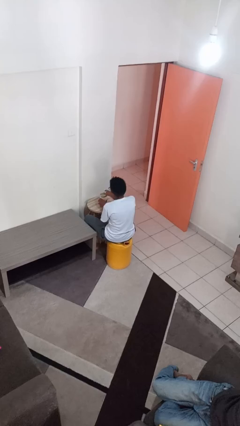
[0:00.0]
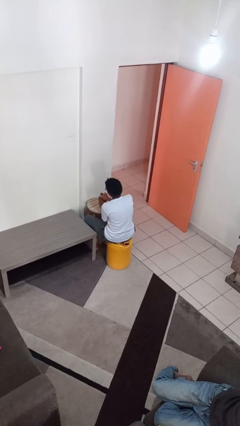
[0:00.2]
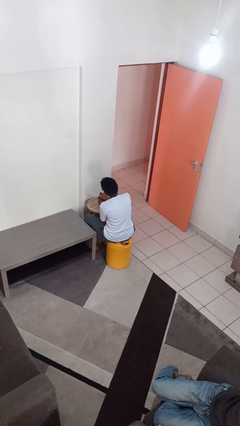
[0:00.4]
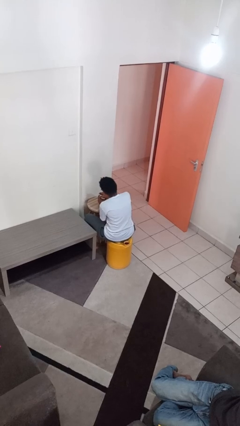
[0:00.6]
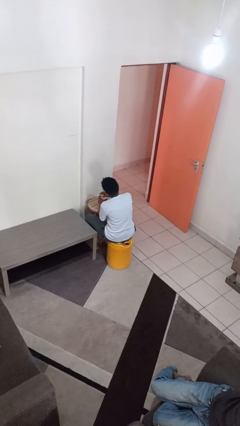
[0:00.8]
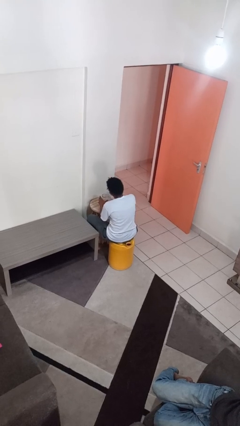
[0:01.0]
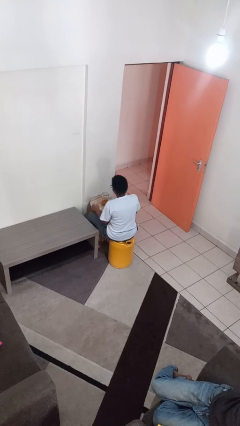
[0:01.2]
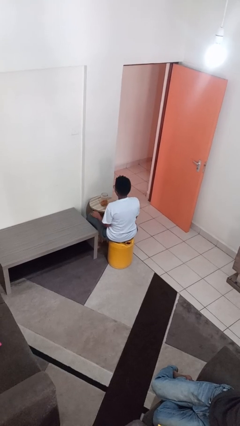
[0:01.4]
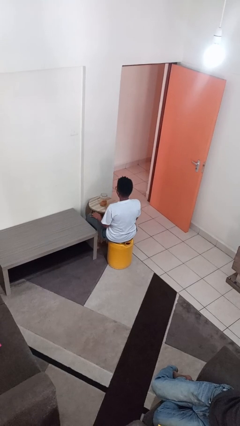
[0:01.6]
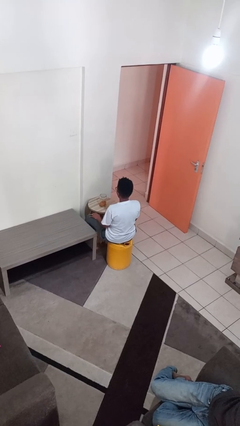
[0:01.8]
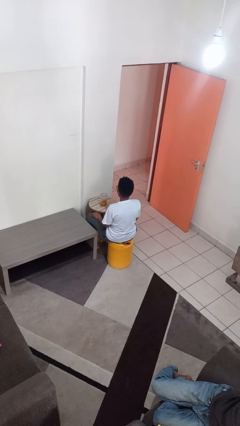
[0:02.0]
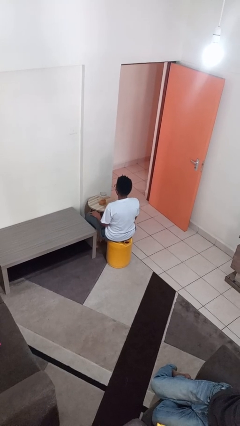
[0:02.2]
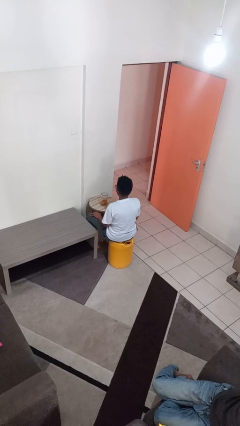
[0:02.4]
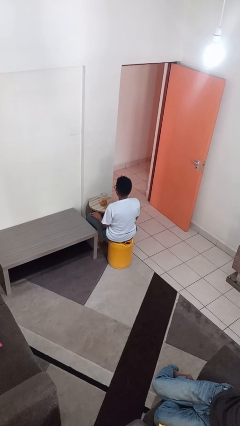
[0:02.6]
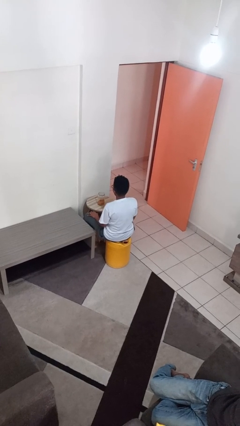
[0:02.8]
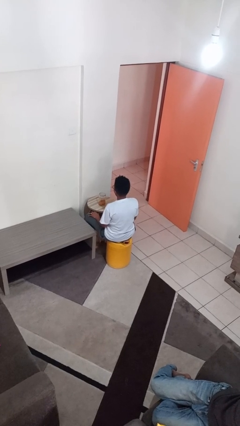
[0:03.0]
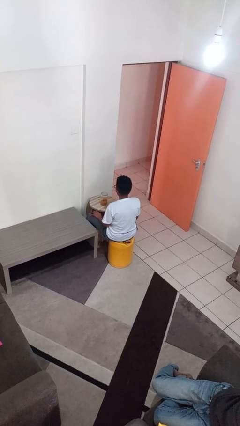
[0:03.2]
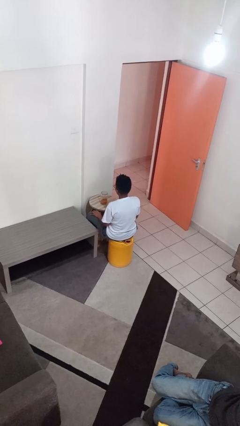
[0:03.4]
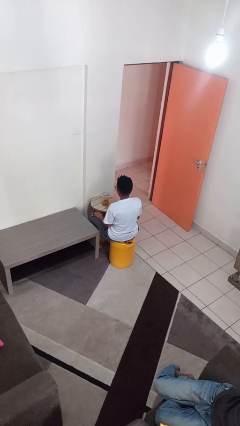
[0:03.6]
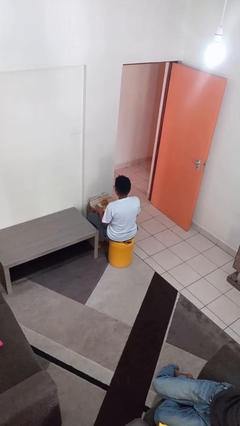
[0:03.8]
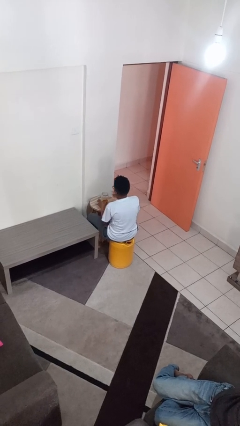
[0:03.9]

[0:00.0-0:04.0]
person opens jar

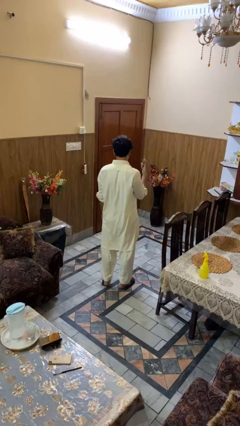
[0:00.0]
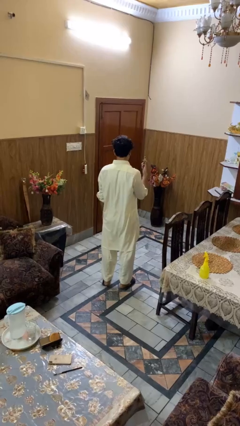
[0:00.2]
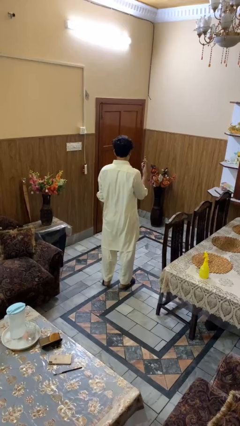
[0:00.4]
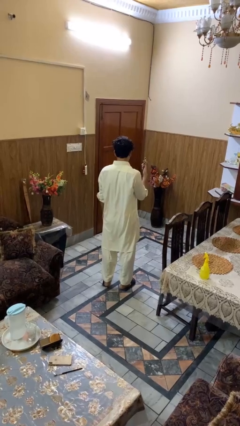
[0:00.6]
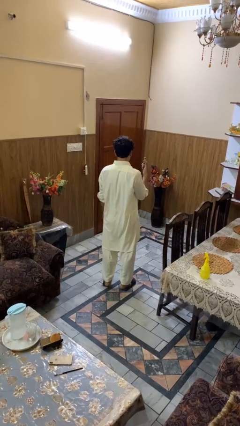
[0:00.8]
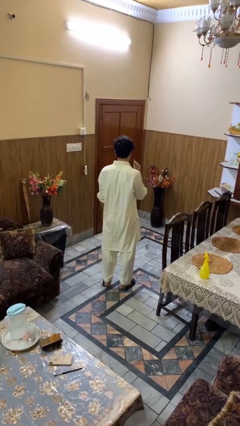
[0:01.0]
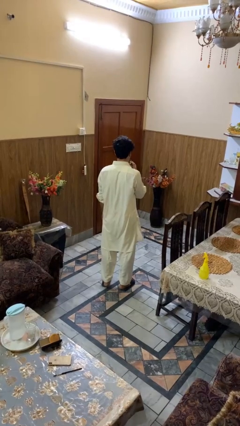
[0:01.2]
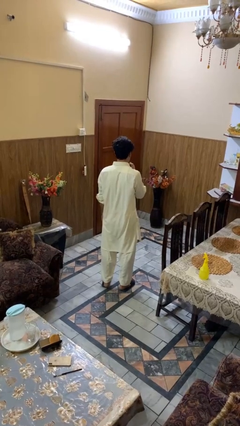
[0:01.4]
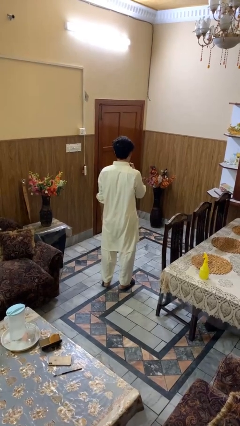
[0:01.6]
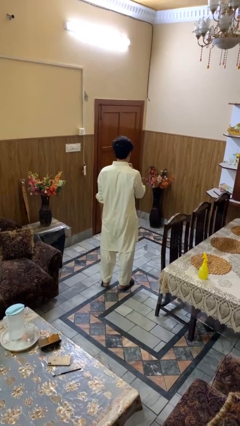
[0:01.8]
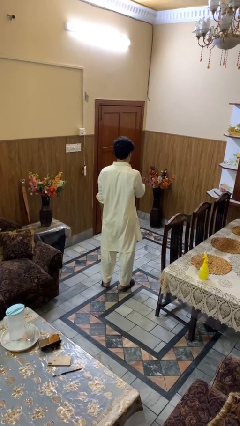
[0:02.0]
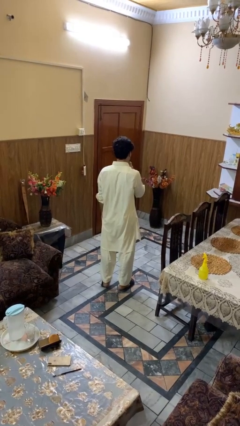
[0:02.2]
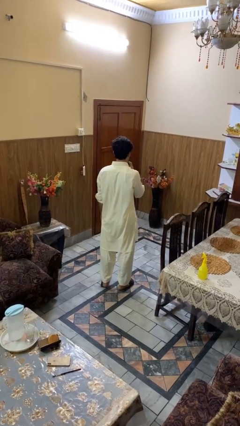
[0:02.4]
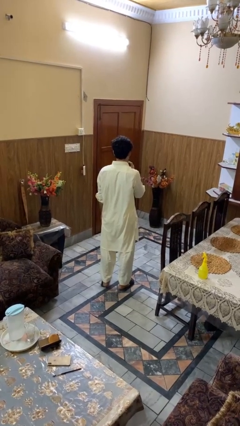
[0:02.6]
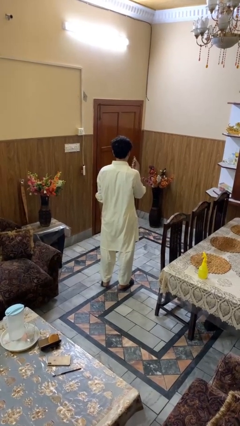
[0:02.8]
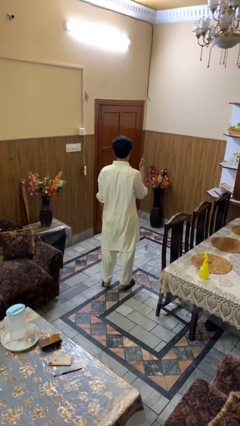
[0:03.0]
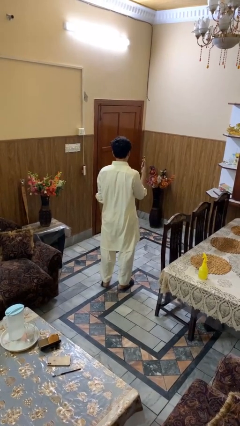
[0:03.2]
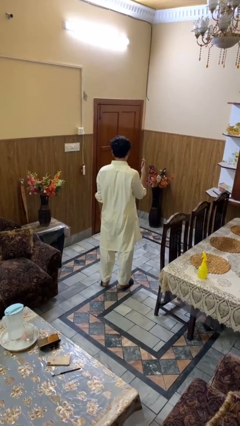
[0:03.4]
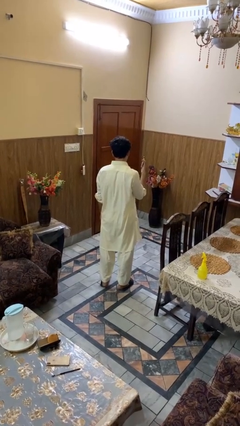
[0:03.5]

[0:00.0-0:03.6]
person applies lip makeup

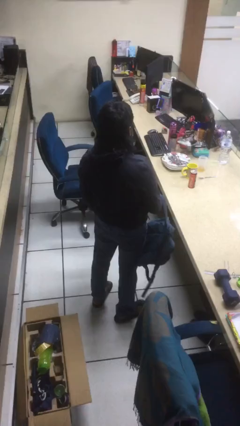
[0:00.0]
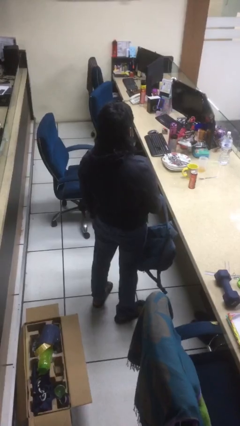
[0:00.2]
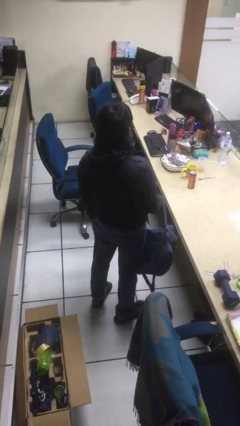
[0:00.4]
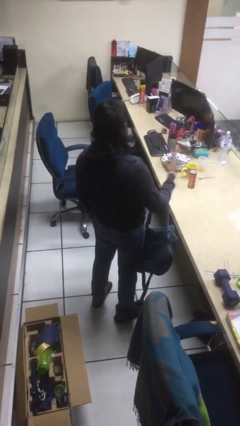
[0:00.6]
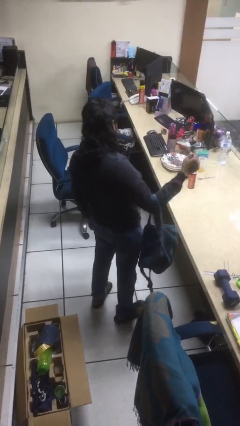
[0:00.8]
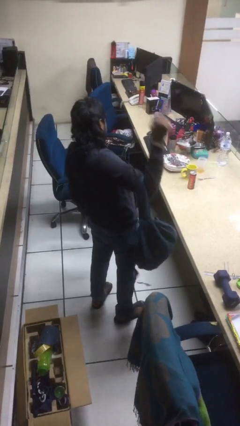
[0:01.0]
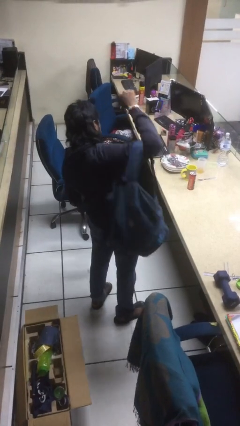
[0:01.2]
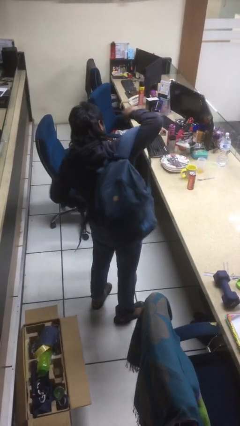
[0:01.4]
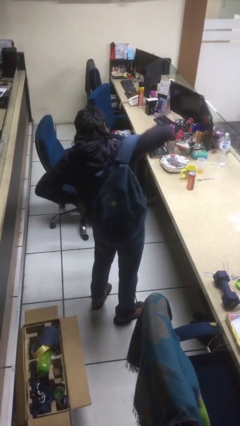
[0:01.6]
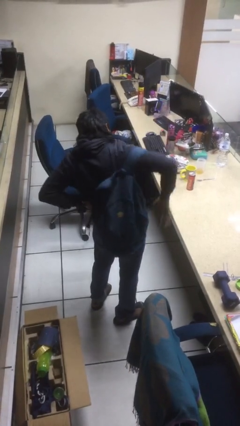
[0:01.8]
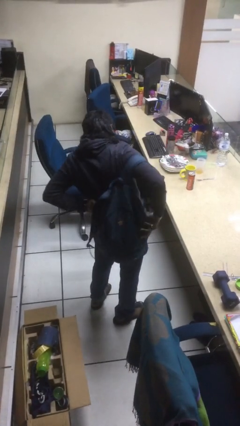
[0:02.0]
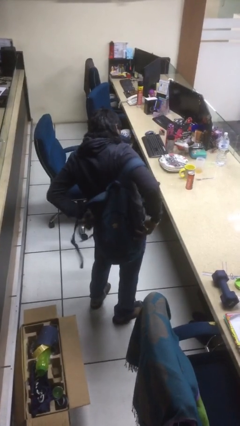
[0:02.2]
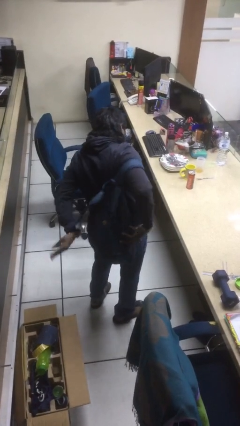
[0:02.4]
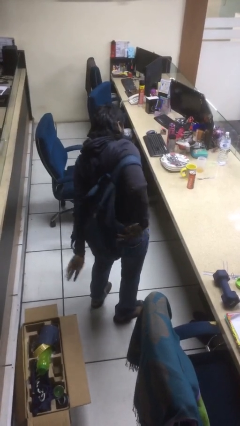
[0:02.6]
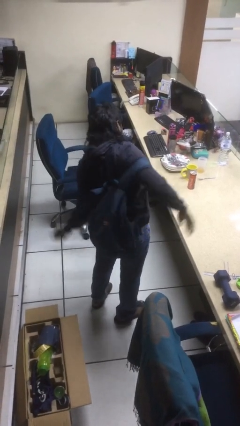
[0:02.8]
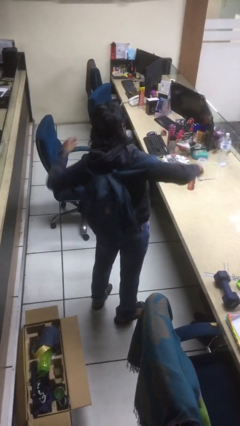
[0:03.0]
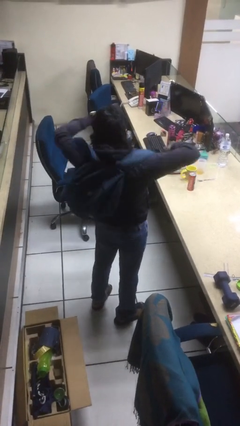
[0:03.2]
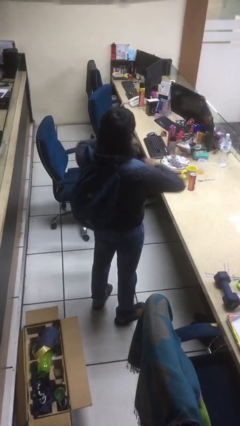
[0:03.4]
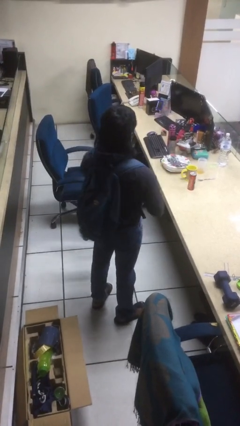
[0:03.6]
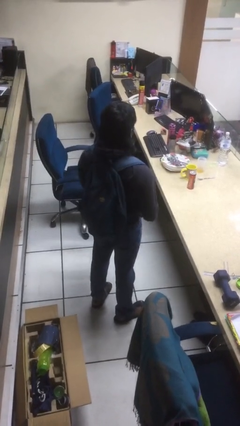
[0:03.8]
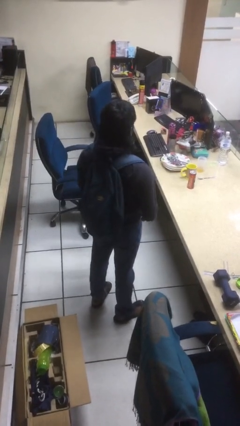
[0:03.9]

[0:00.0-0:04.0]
person puts on backpack

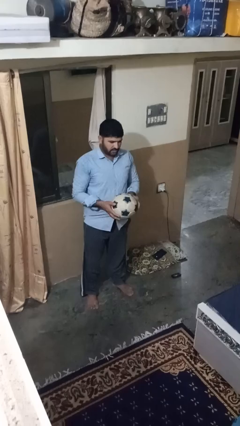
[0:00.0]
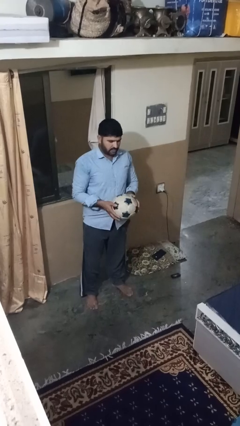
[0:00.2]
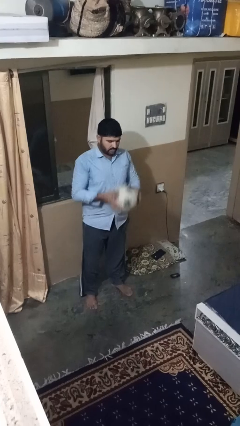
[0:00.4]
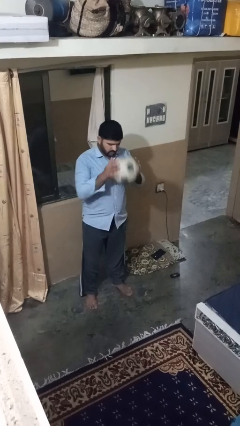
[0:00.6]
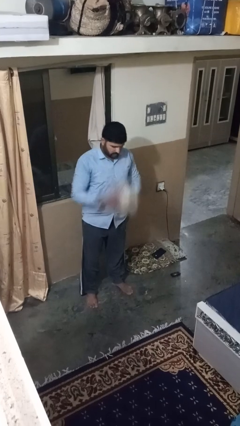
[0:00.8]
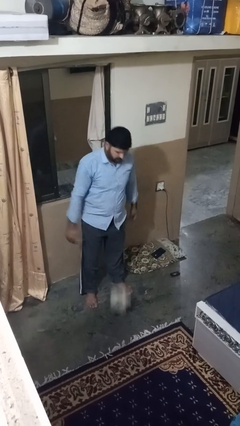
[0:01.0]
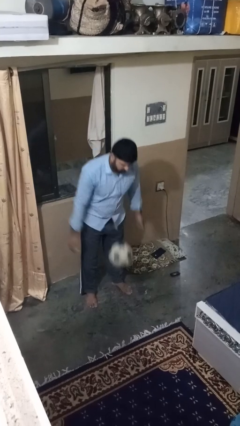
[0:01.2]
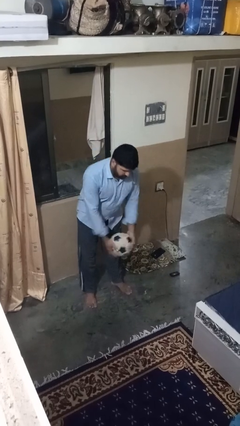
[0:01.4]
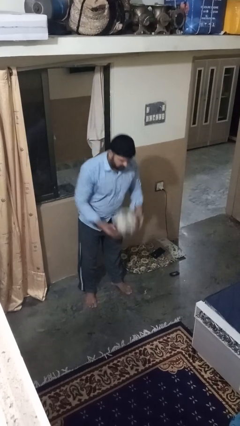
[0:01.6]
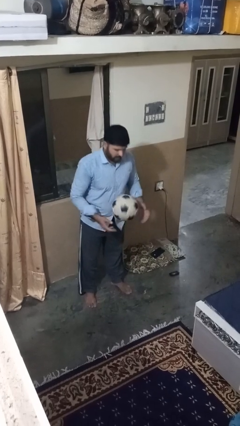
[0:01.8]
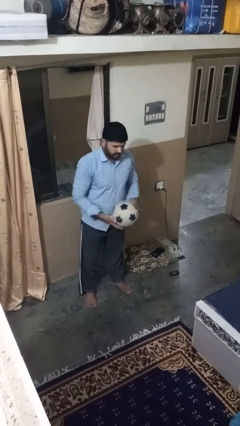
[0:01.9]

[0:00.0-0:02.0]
person bounces ball on floor

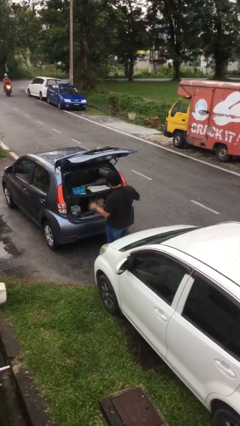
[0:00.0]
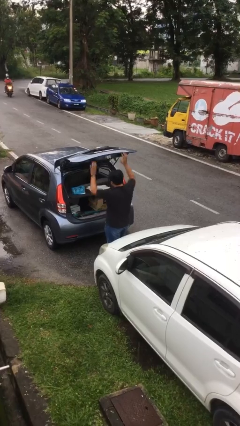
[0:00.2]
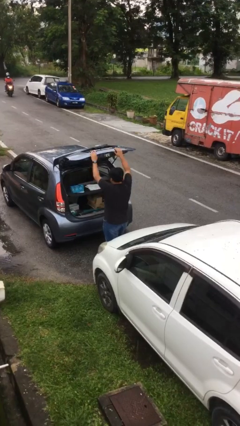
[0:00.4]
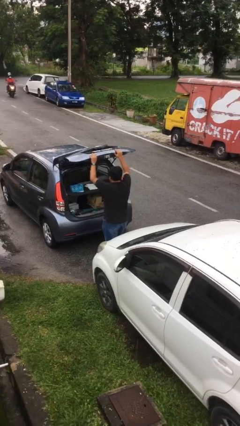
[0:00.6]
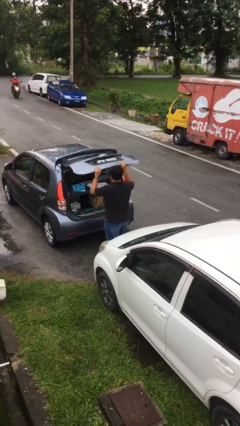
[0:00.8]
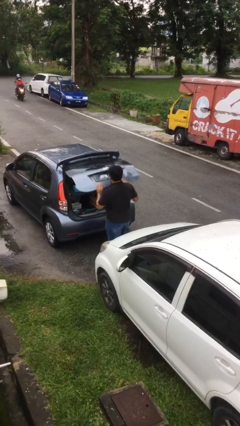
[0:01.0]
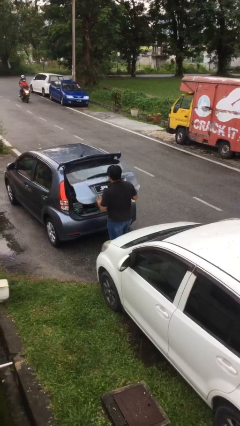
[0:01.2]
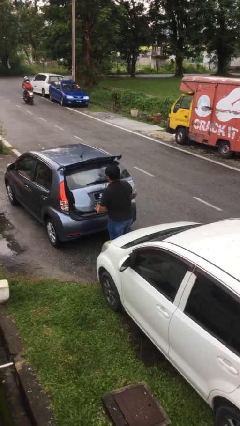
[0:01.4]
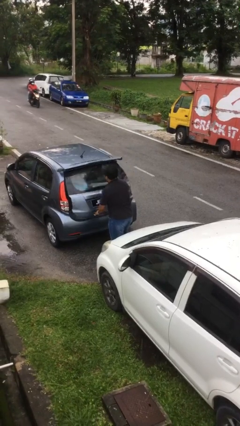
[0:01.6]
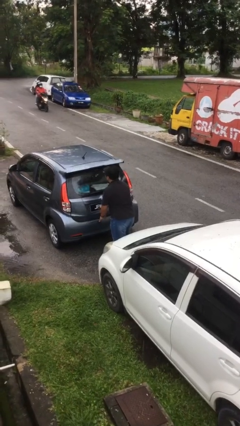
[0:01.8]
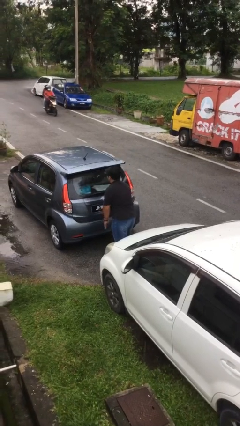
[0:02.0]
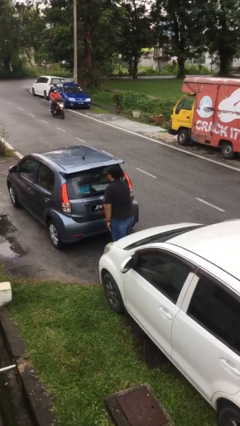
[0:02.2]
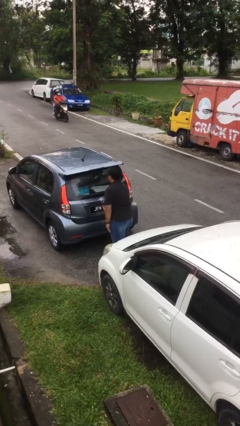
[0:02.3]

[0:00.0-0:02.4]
person closes car trunk

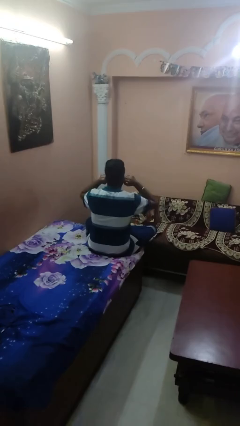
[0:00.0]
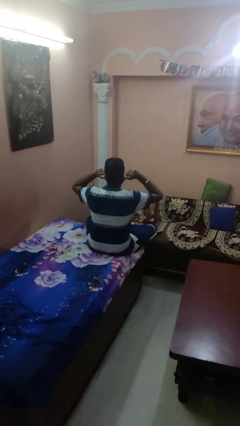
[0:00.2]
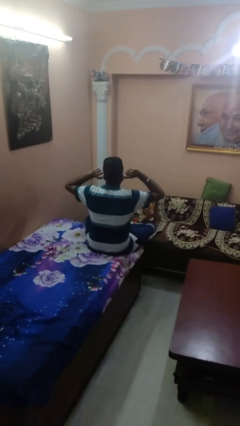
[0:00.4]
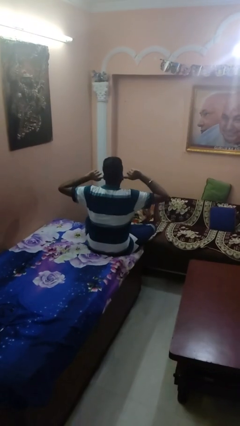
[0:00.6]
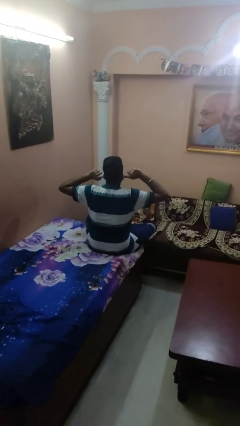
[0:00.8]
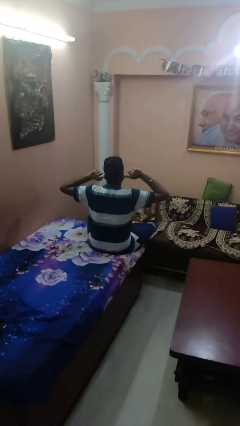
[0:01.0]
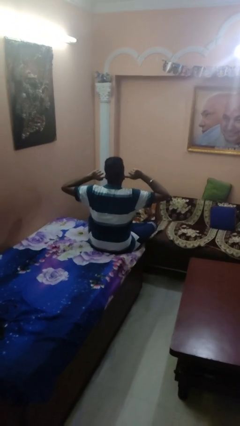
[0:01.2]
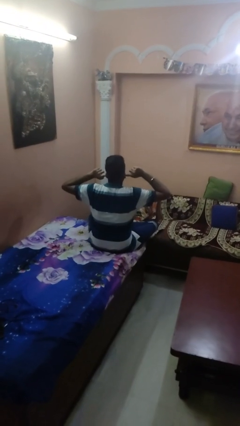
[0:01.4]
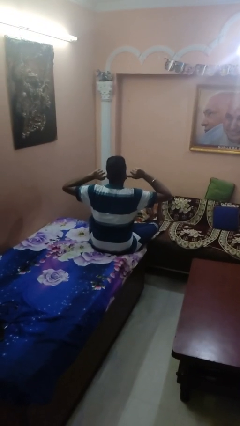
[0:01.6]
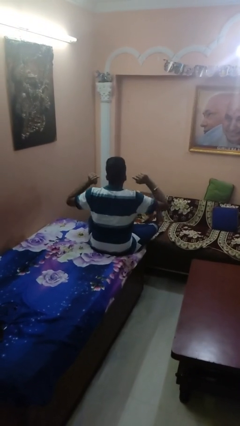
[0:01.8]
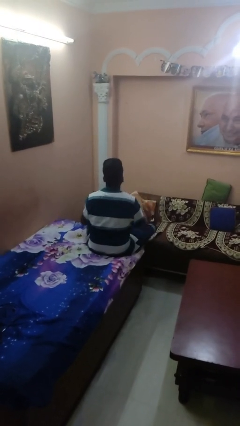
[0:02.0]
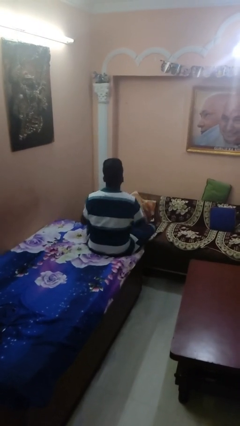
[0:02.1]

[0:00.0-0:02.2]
person puts fingers in ear
